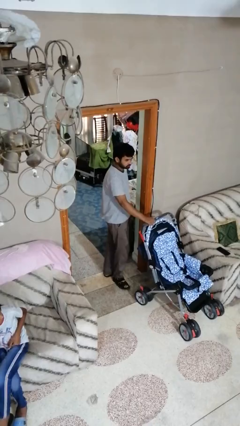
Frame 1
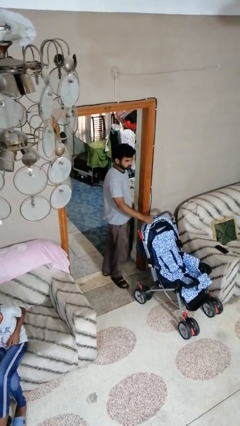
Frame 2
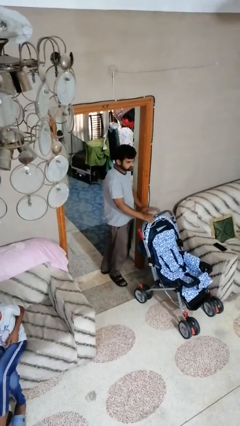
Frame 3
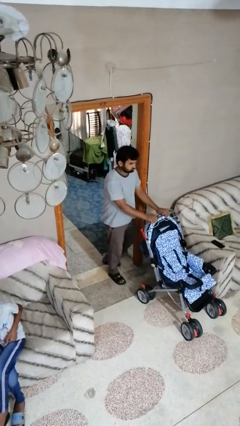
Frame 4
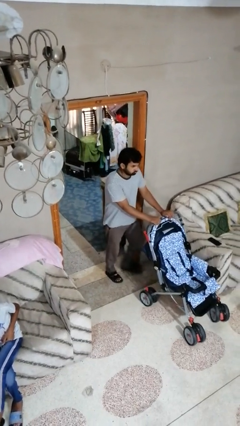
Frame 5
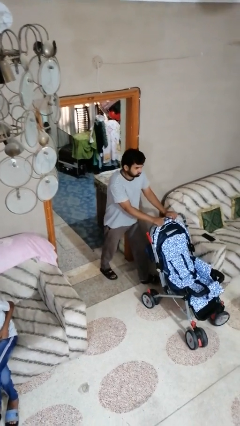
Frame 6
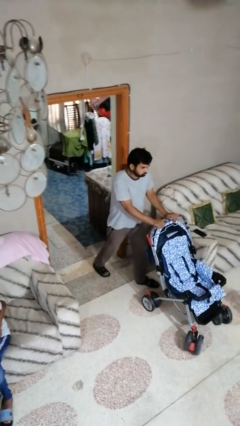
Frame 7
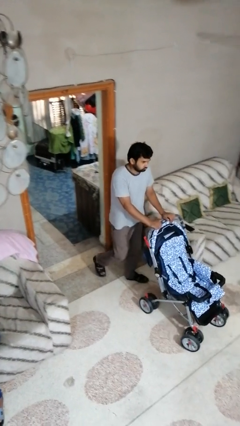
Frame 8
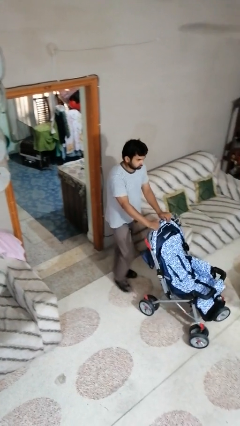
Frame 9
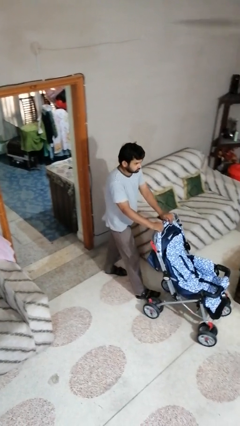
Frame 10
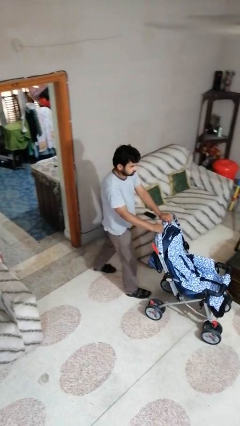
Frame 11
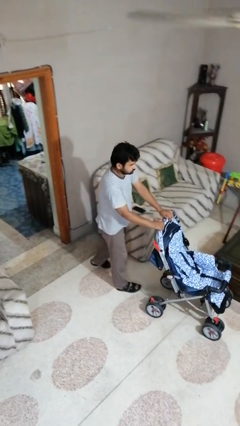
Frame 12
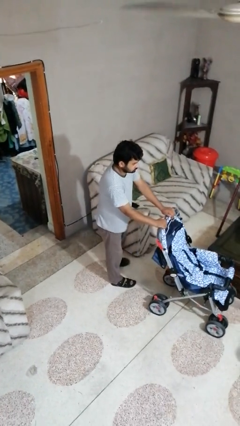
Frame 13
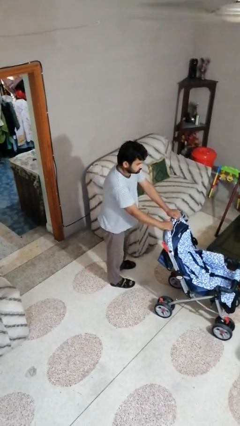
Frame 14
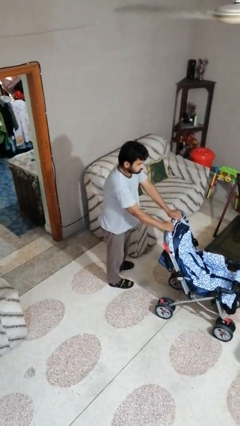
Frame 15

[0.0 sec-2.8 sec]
person pushes wheeled cart

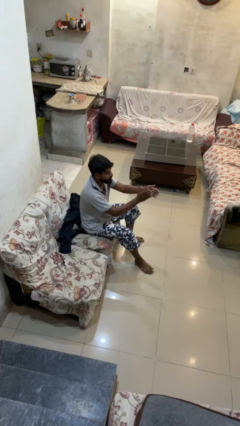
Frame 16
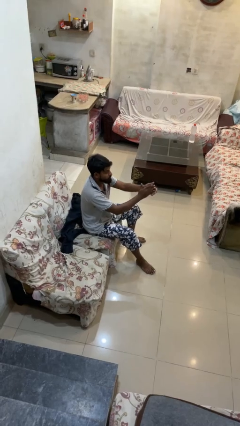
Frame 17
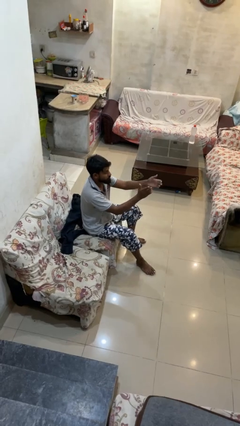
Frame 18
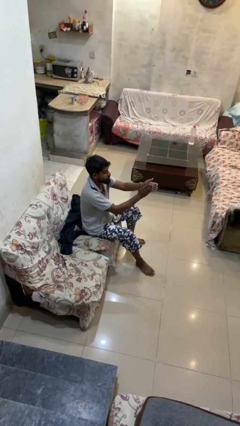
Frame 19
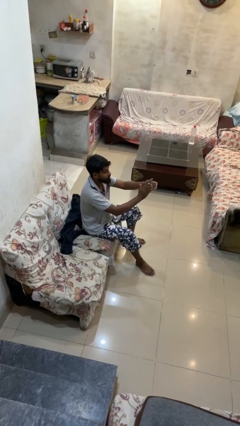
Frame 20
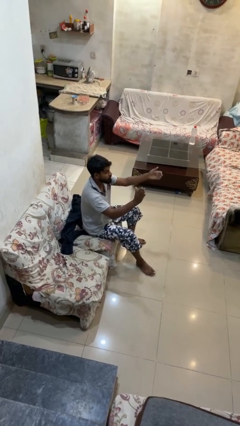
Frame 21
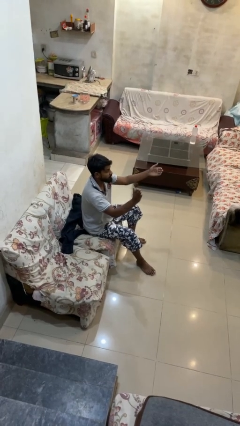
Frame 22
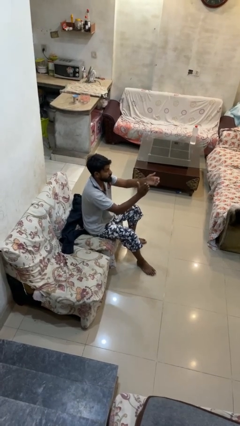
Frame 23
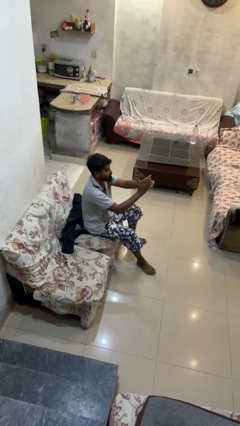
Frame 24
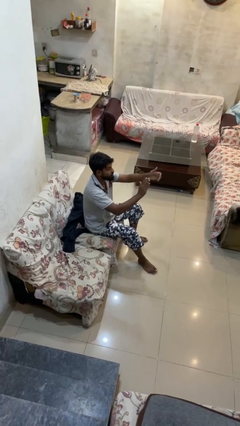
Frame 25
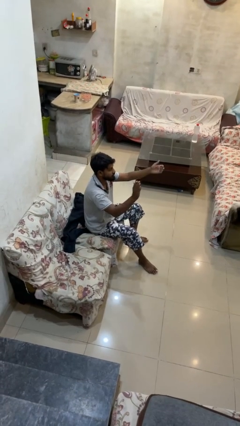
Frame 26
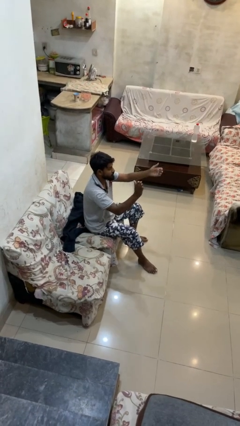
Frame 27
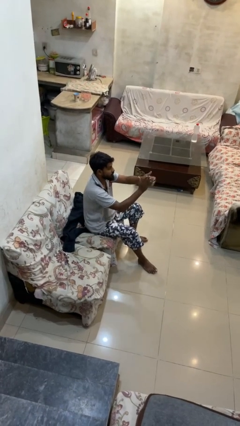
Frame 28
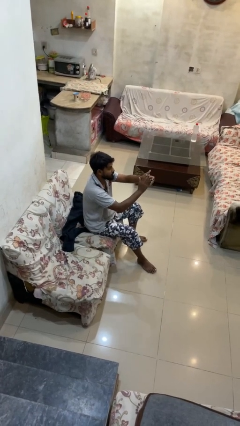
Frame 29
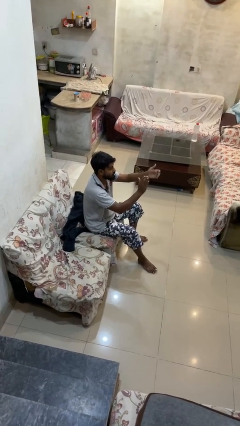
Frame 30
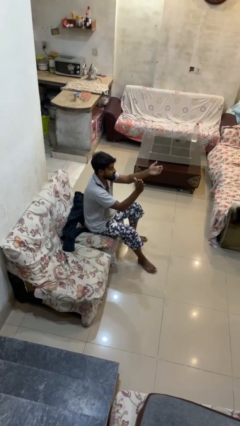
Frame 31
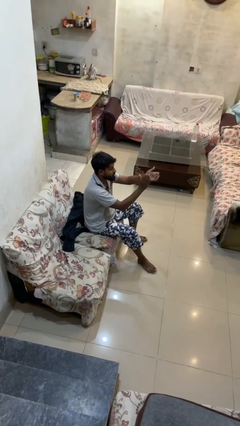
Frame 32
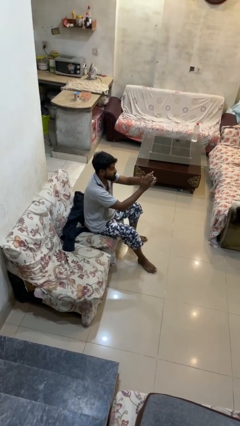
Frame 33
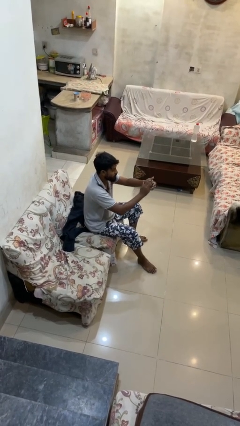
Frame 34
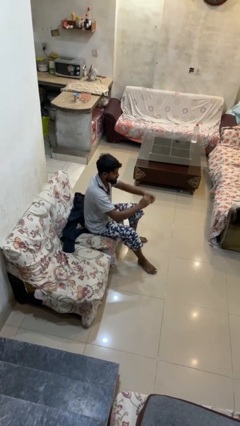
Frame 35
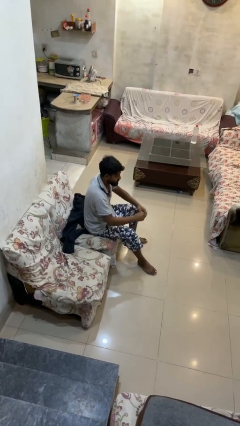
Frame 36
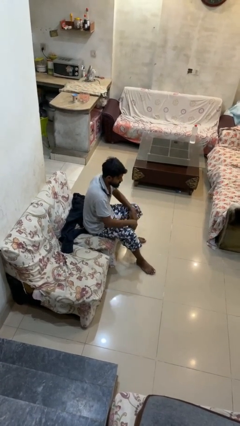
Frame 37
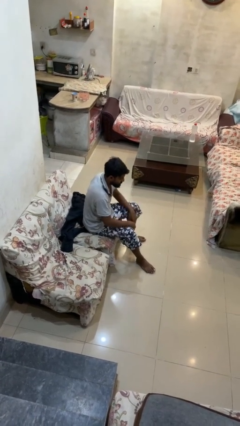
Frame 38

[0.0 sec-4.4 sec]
person claps hands

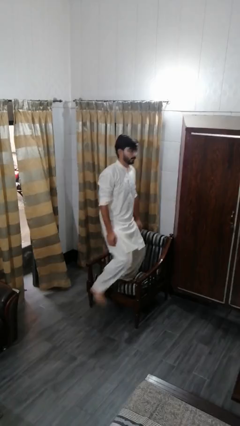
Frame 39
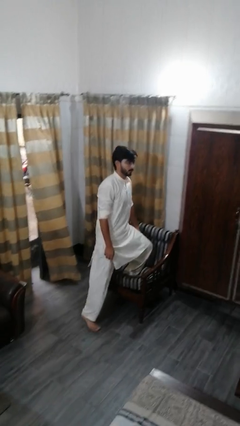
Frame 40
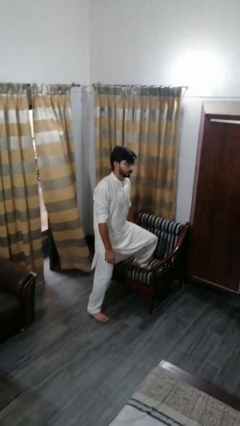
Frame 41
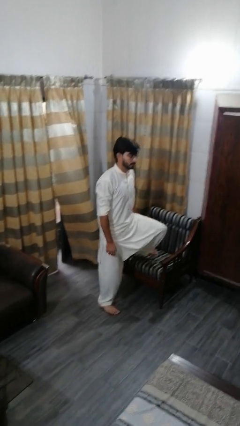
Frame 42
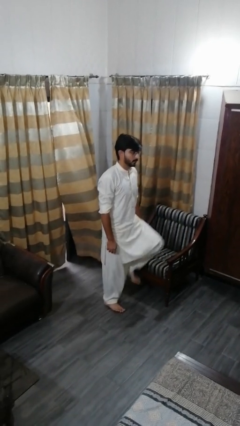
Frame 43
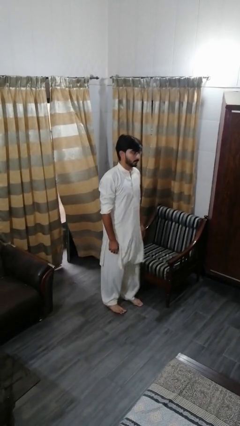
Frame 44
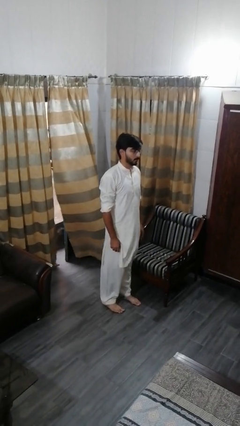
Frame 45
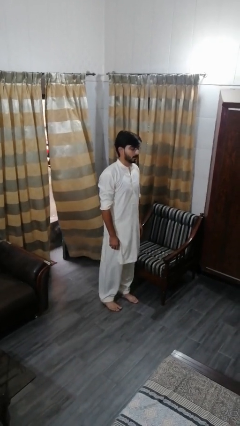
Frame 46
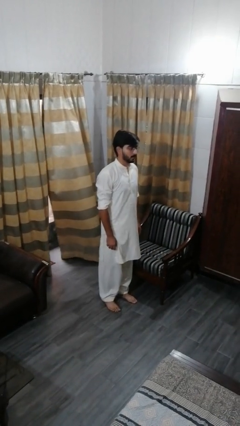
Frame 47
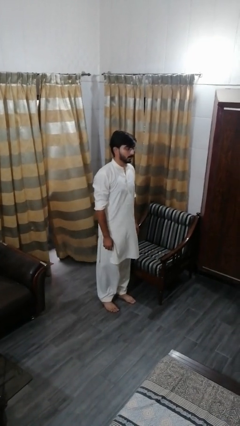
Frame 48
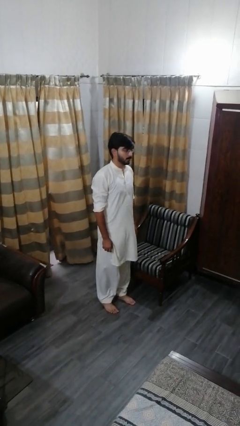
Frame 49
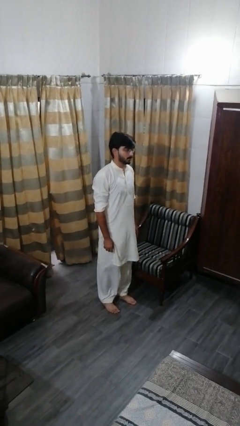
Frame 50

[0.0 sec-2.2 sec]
person climbs off chair

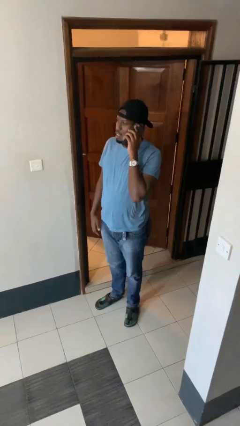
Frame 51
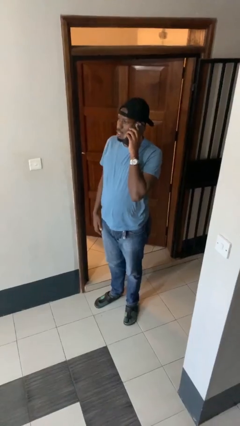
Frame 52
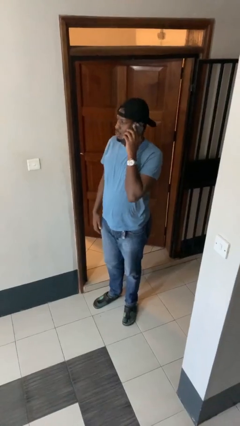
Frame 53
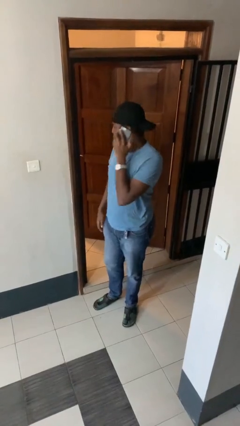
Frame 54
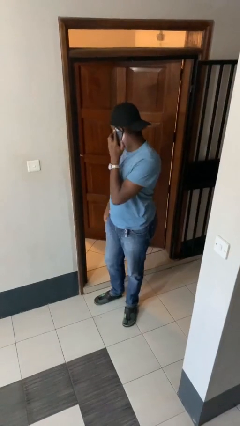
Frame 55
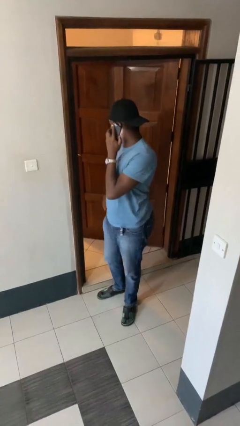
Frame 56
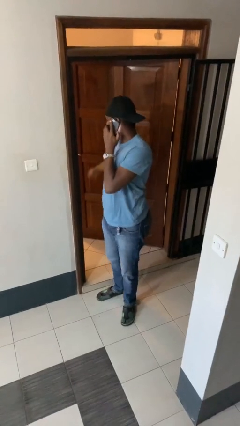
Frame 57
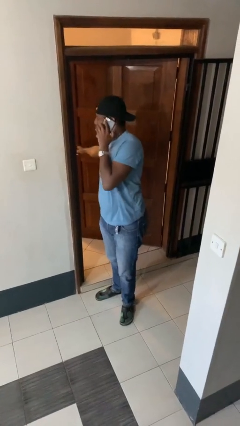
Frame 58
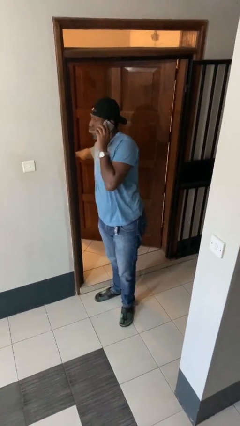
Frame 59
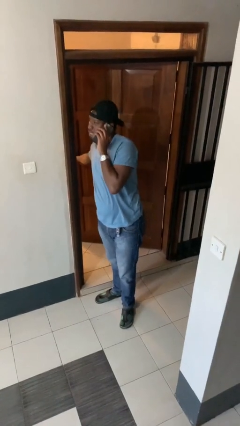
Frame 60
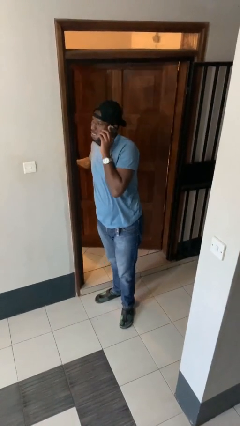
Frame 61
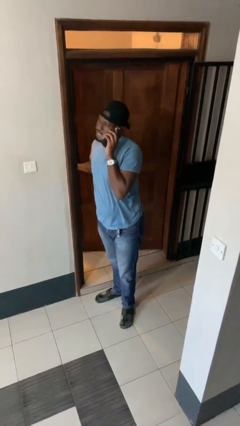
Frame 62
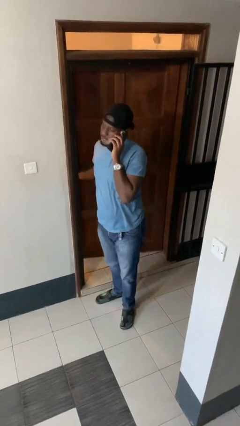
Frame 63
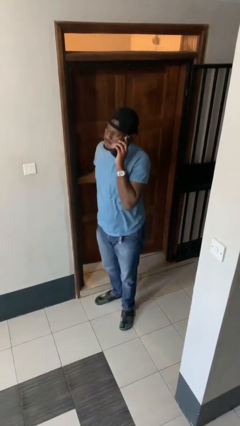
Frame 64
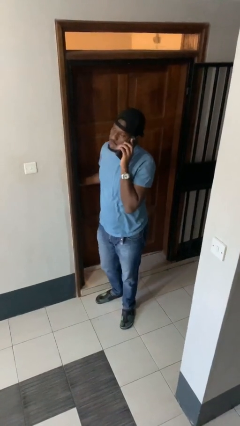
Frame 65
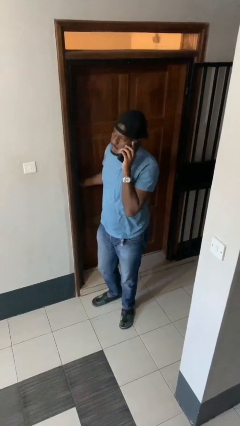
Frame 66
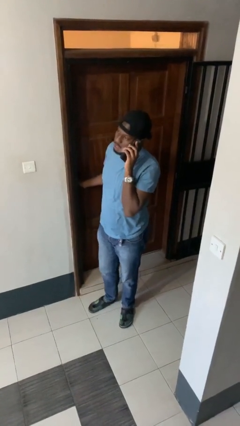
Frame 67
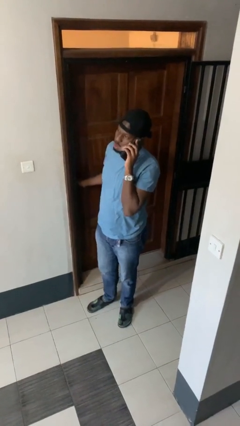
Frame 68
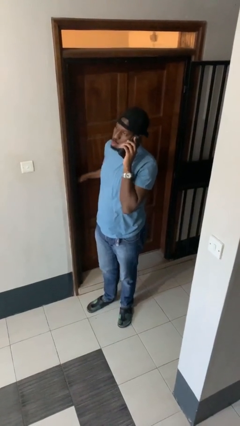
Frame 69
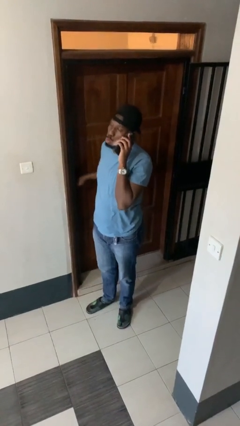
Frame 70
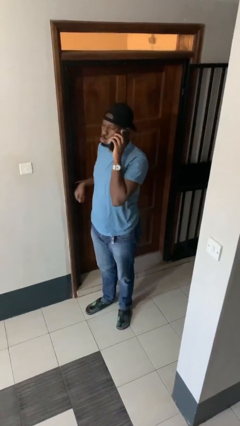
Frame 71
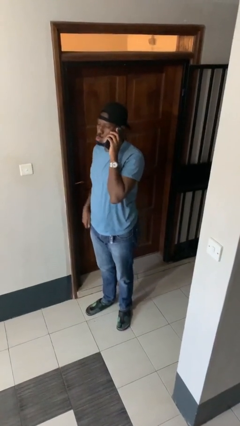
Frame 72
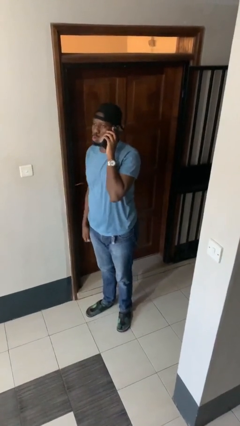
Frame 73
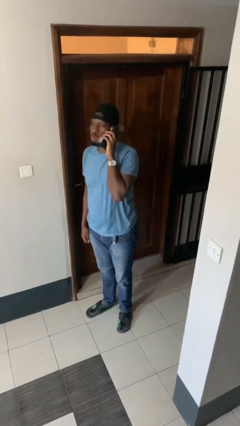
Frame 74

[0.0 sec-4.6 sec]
person closes facility door

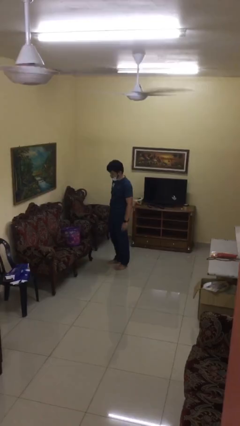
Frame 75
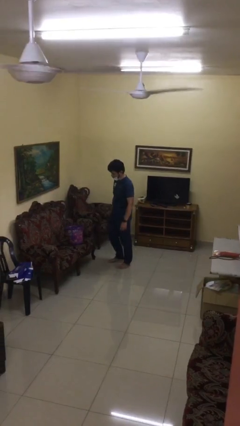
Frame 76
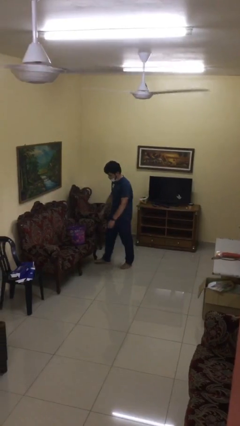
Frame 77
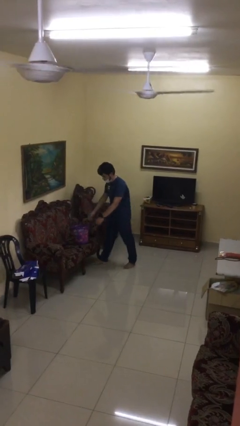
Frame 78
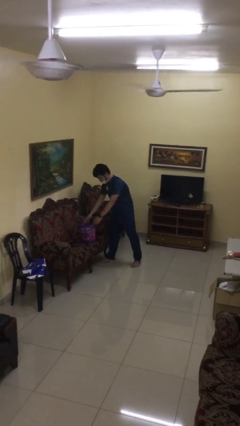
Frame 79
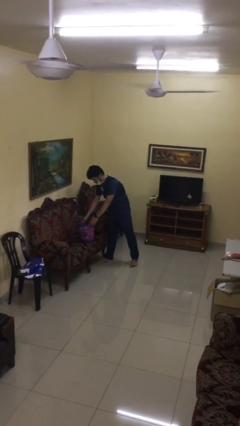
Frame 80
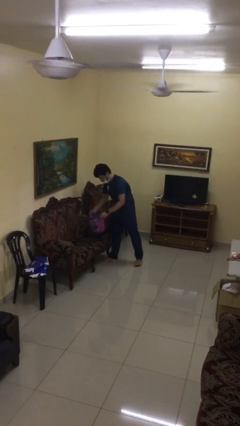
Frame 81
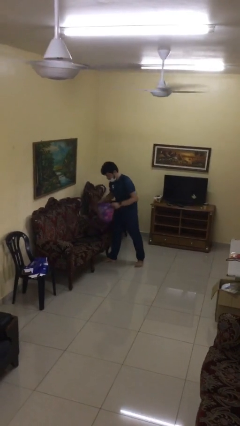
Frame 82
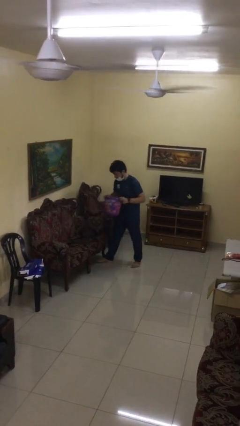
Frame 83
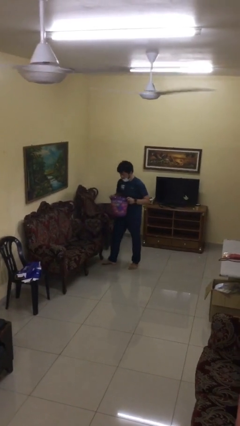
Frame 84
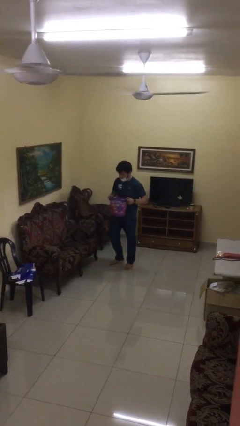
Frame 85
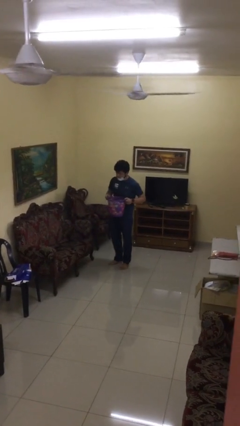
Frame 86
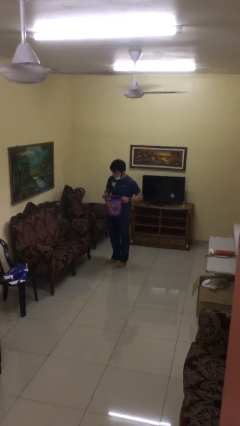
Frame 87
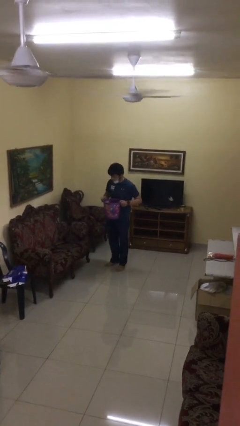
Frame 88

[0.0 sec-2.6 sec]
person picks up object from couch

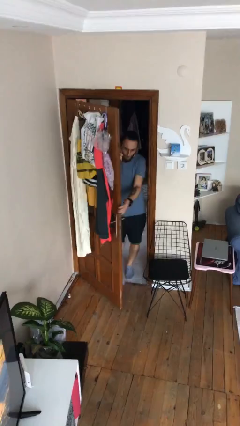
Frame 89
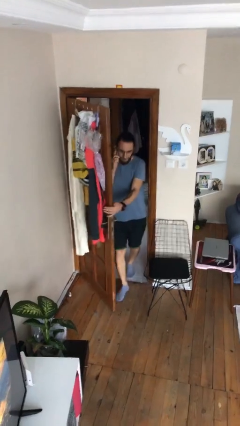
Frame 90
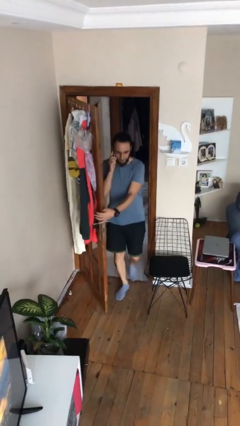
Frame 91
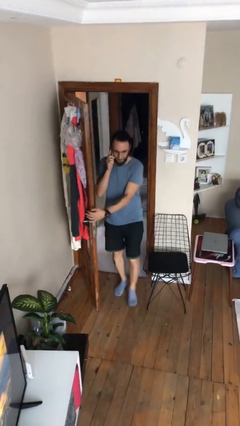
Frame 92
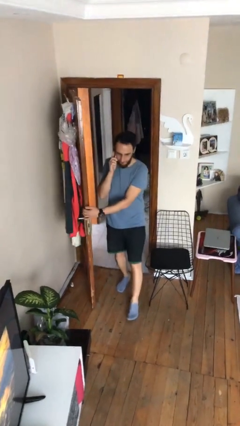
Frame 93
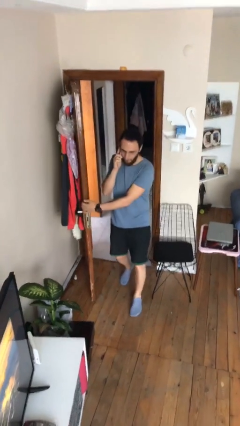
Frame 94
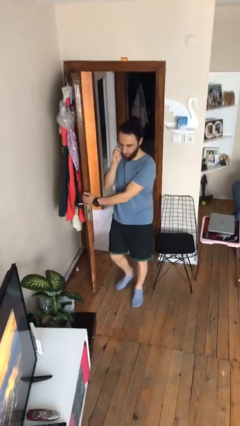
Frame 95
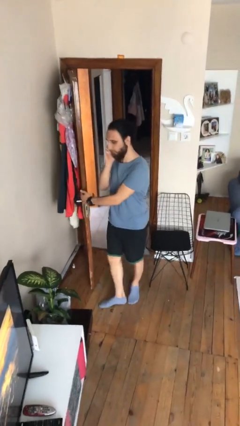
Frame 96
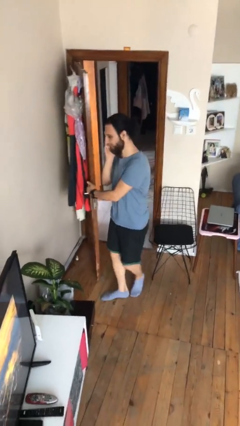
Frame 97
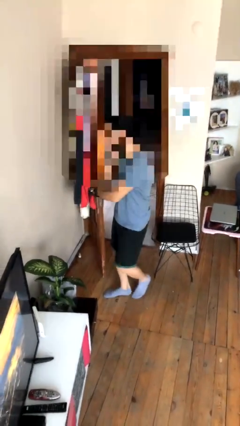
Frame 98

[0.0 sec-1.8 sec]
person enters scene through structure
